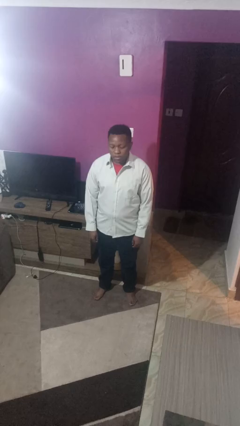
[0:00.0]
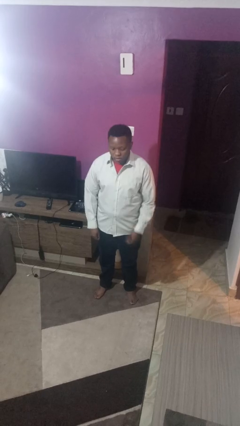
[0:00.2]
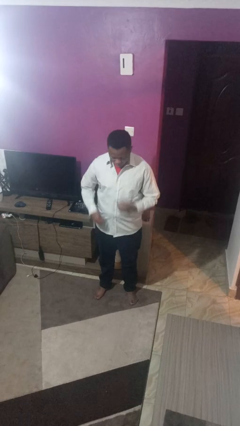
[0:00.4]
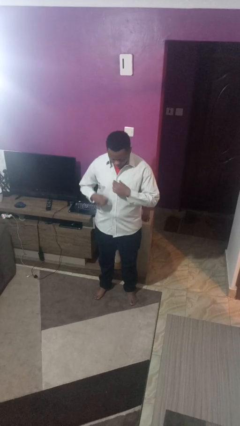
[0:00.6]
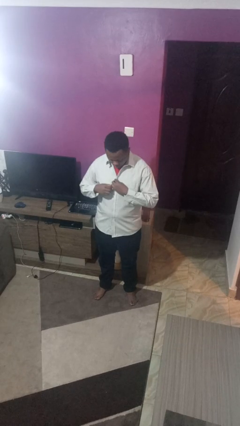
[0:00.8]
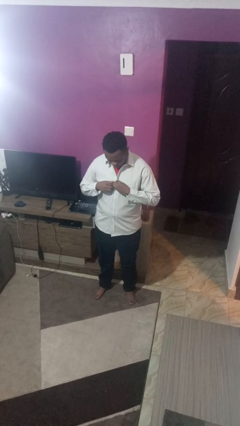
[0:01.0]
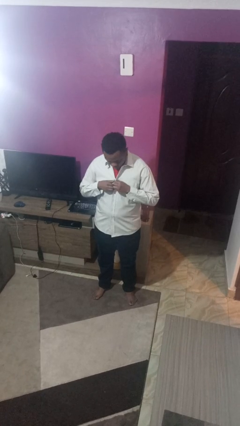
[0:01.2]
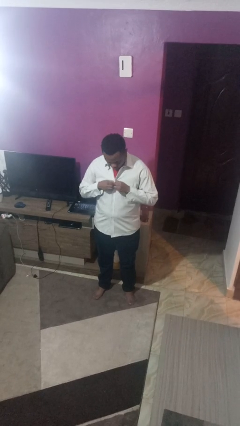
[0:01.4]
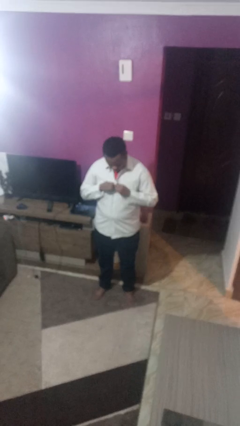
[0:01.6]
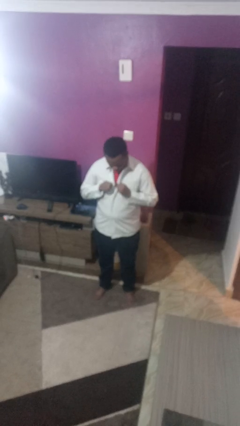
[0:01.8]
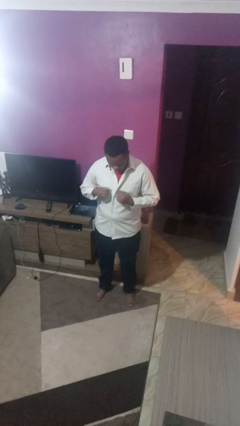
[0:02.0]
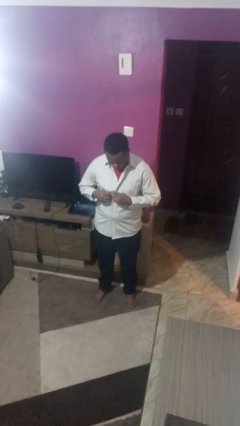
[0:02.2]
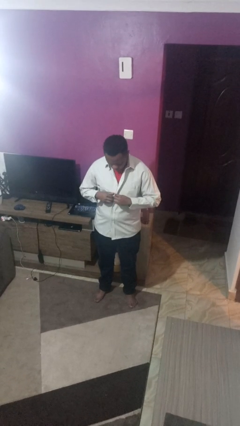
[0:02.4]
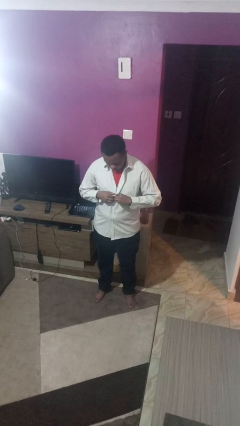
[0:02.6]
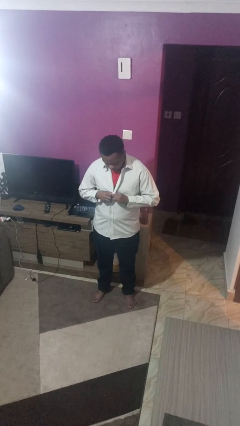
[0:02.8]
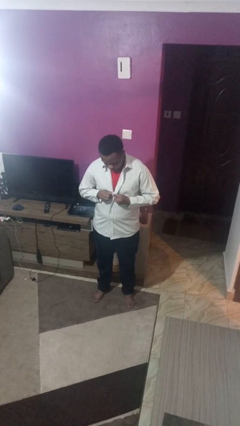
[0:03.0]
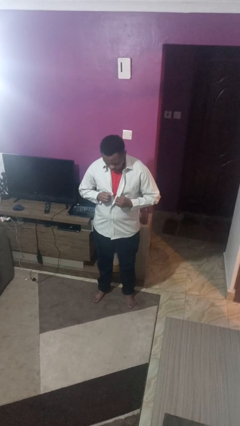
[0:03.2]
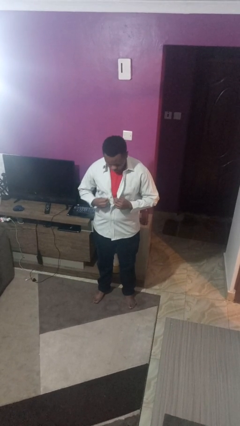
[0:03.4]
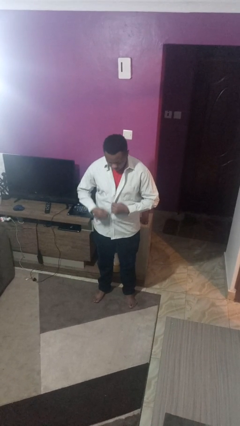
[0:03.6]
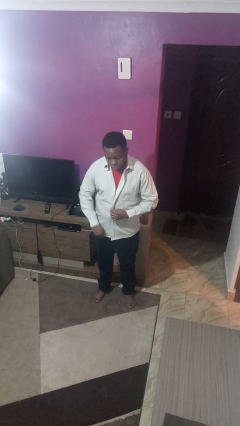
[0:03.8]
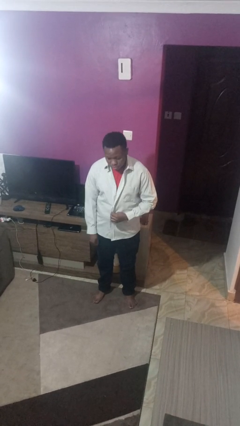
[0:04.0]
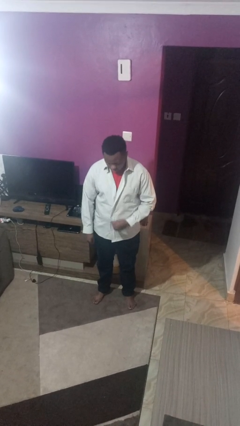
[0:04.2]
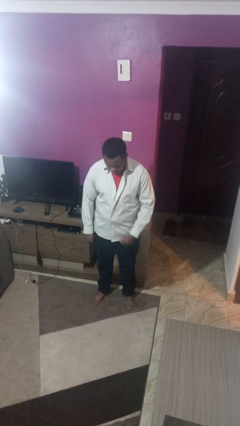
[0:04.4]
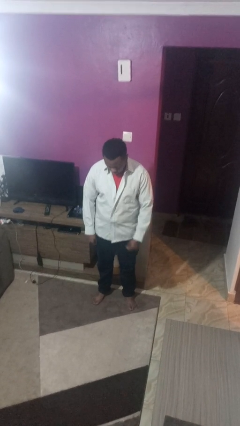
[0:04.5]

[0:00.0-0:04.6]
person unbuttons shirt

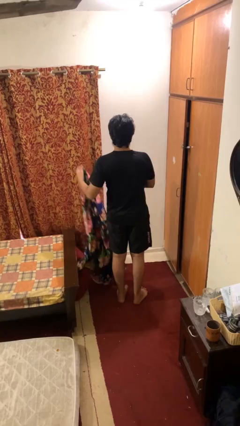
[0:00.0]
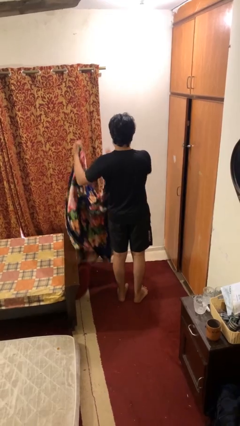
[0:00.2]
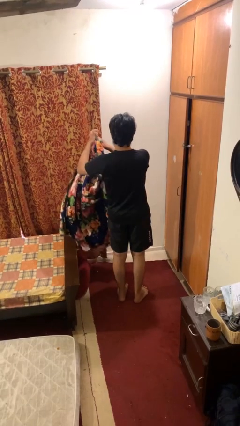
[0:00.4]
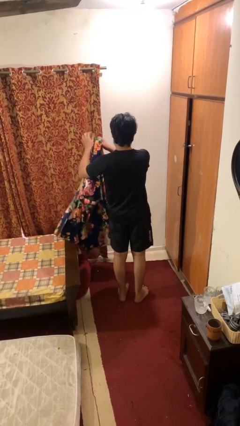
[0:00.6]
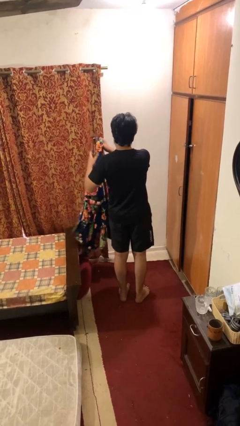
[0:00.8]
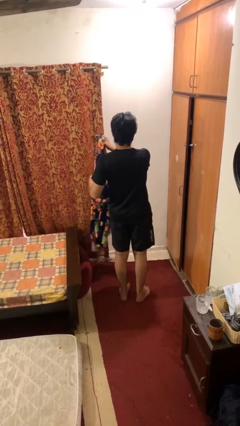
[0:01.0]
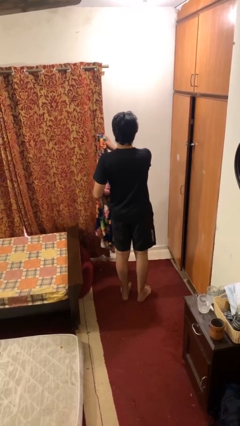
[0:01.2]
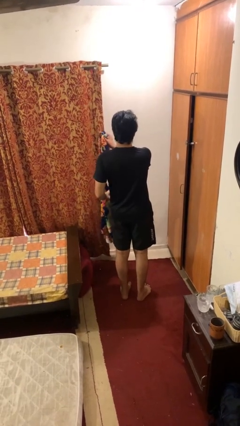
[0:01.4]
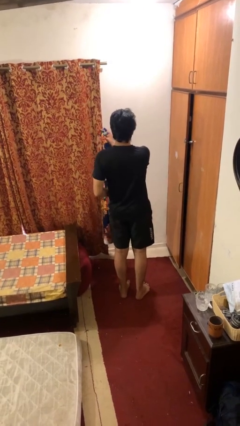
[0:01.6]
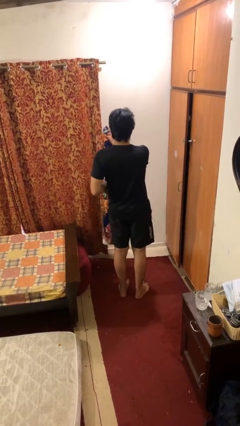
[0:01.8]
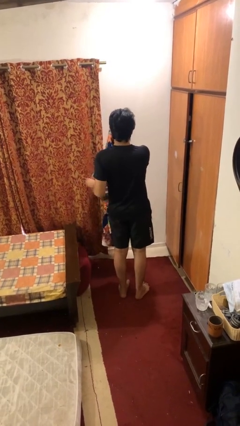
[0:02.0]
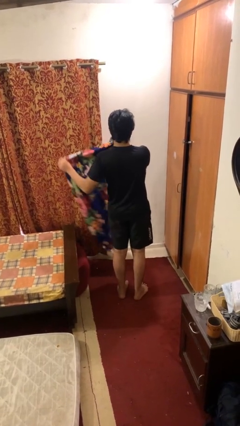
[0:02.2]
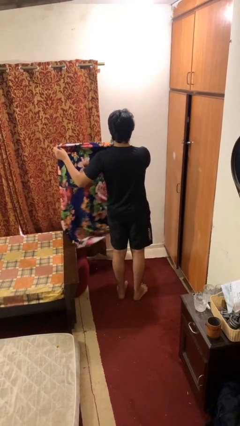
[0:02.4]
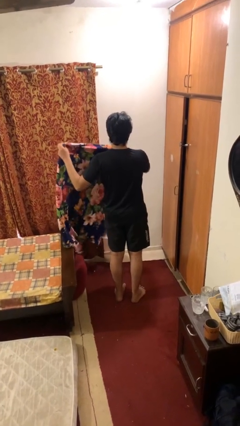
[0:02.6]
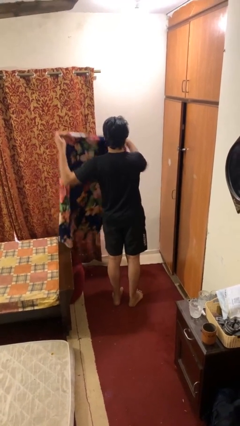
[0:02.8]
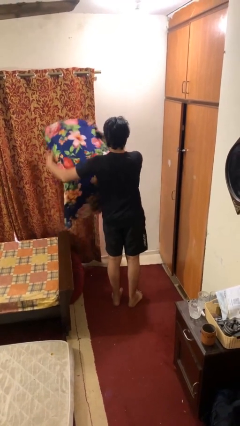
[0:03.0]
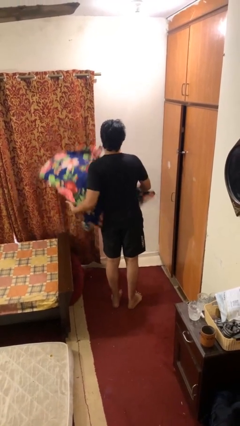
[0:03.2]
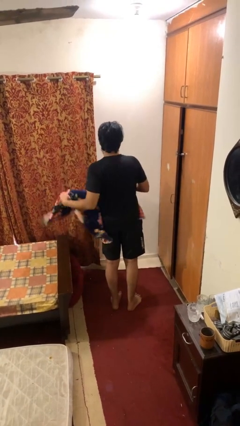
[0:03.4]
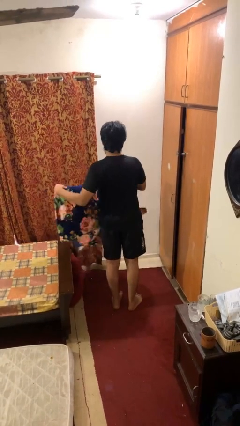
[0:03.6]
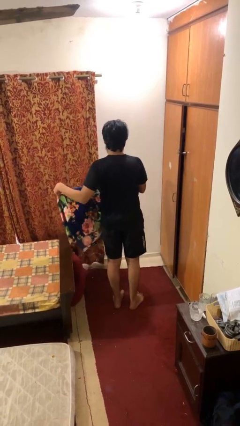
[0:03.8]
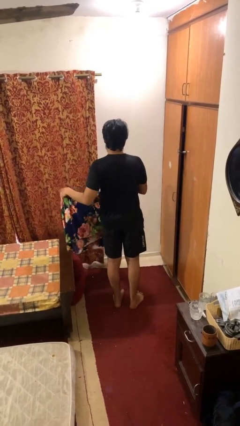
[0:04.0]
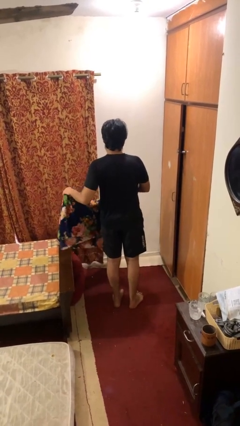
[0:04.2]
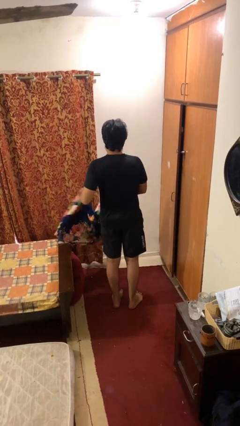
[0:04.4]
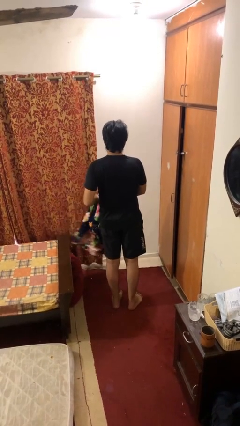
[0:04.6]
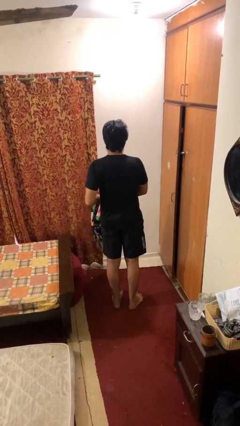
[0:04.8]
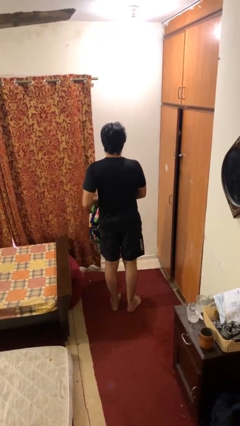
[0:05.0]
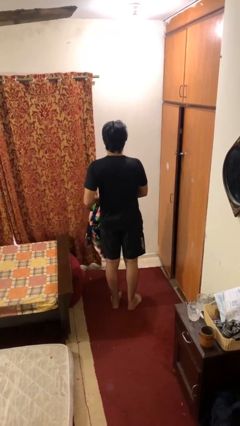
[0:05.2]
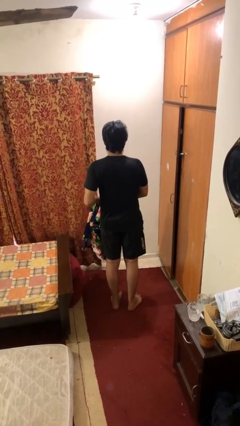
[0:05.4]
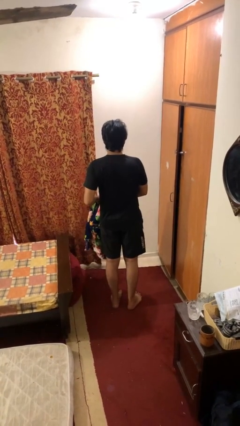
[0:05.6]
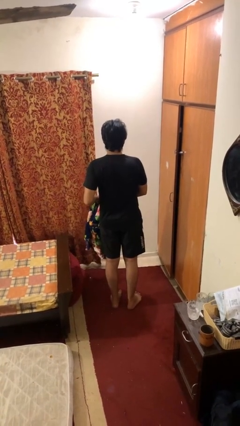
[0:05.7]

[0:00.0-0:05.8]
person folds blanket

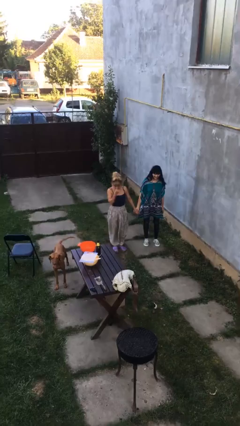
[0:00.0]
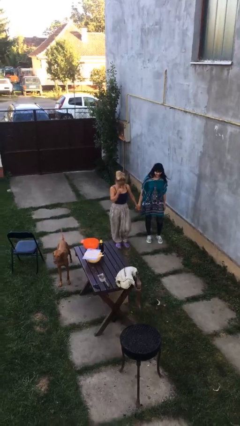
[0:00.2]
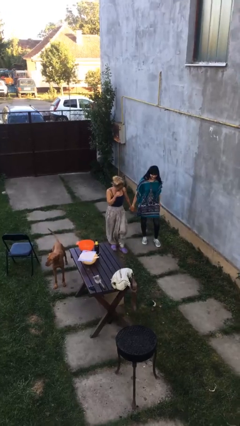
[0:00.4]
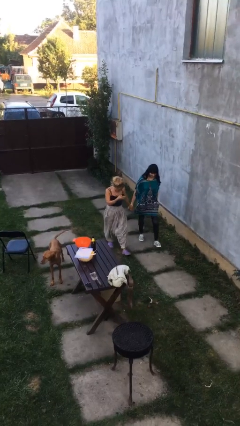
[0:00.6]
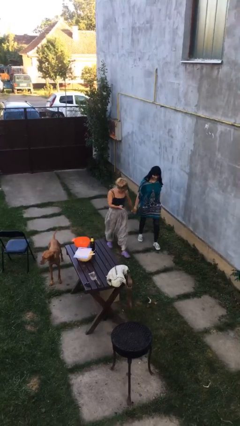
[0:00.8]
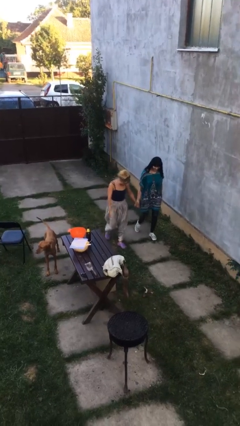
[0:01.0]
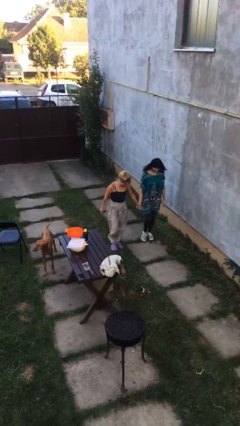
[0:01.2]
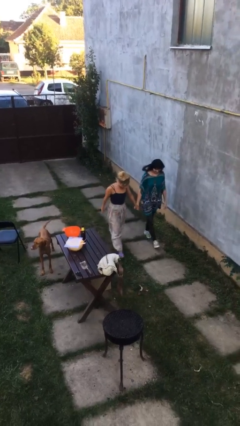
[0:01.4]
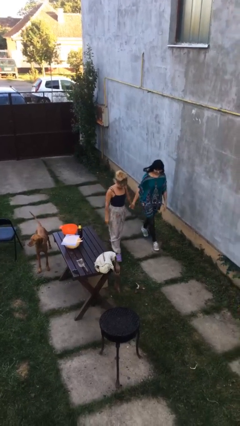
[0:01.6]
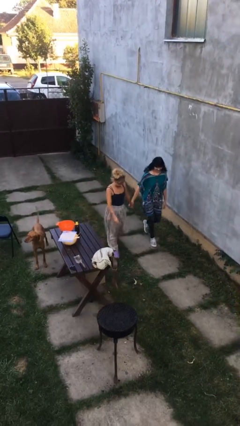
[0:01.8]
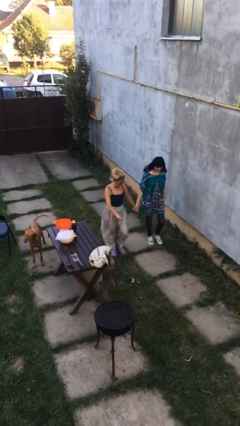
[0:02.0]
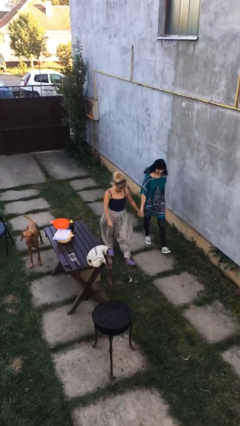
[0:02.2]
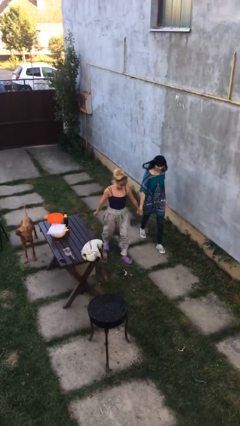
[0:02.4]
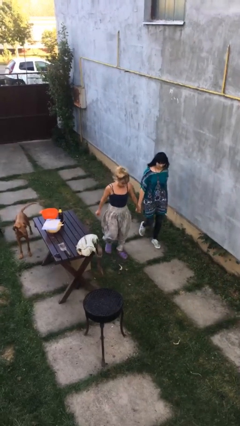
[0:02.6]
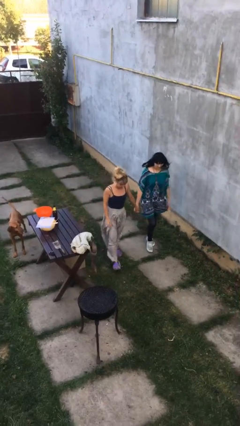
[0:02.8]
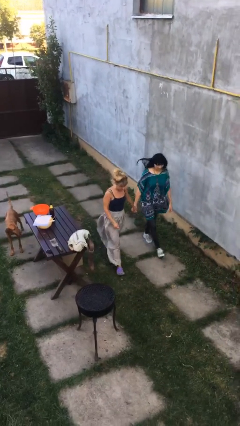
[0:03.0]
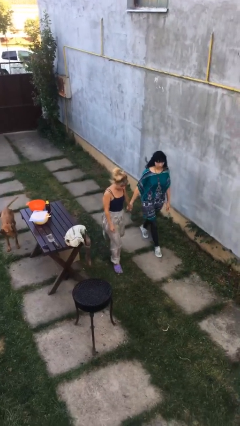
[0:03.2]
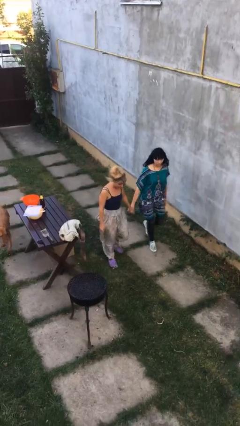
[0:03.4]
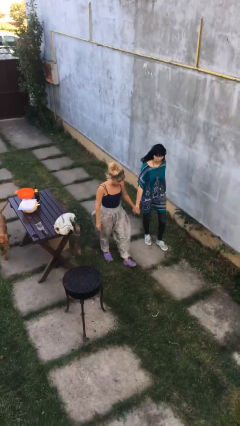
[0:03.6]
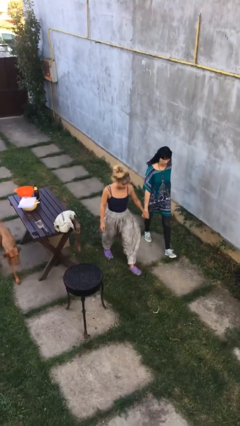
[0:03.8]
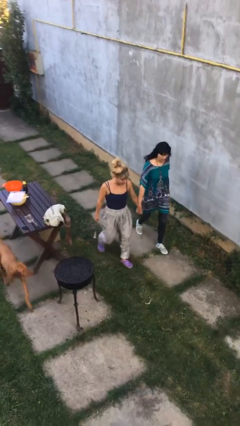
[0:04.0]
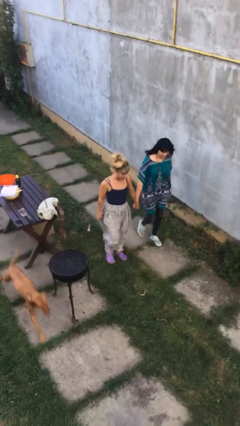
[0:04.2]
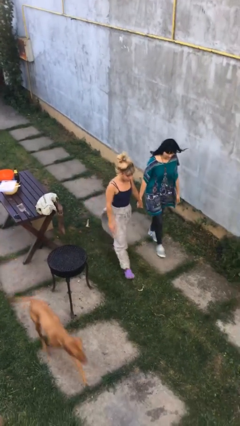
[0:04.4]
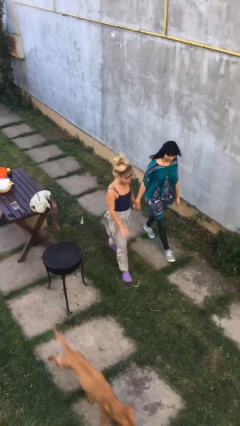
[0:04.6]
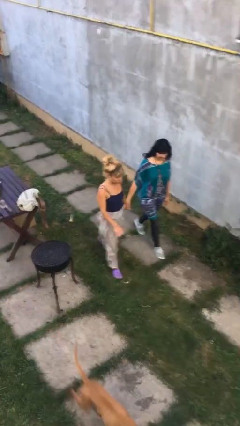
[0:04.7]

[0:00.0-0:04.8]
person holds hand

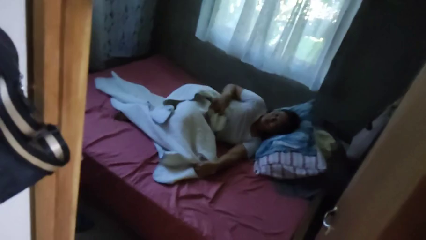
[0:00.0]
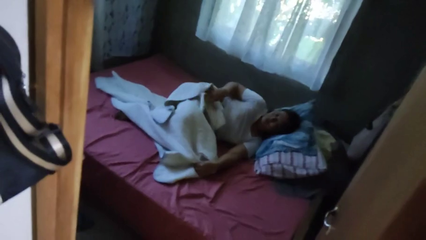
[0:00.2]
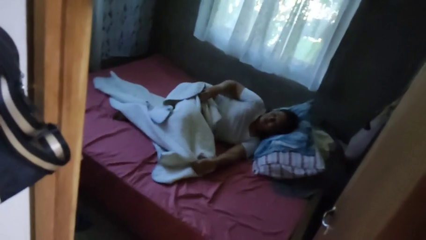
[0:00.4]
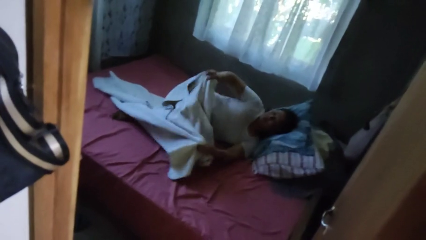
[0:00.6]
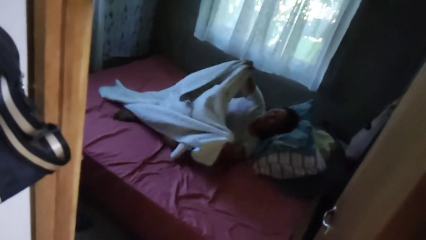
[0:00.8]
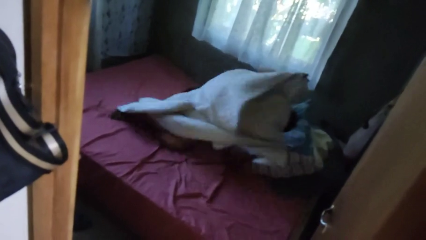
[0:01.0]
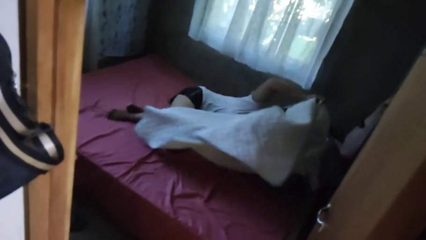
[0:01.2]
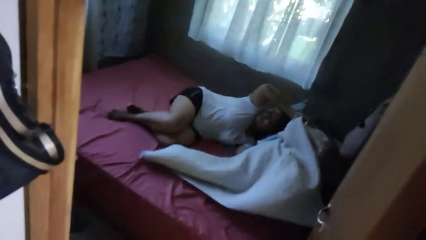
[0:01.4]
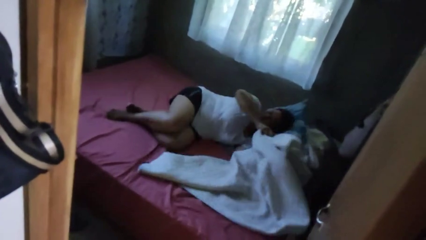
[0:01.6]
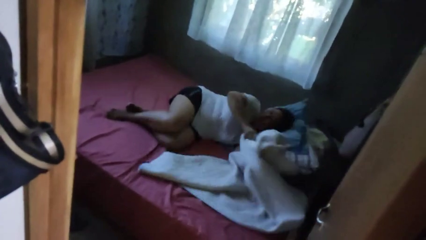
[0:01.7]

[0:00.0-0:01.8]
person uncovers with bedsheets

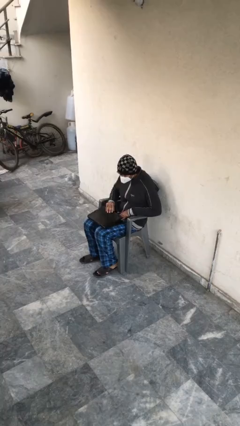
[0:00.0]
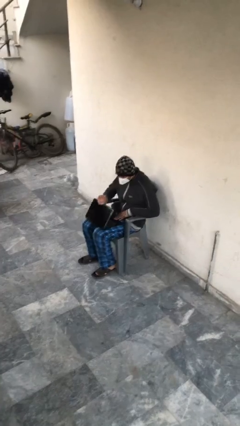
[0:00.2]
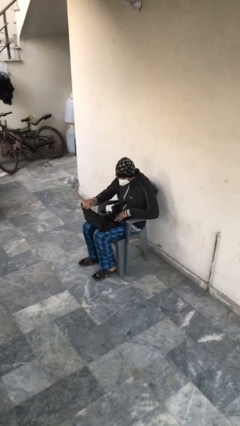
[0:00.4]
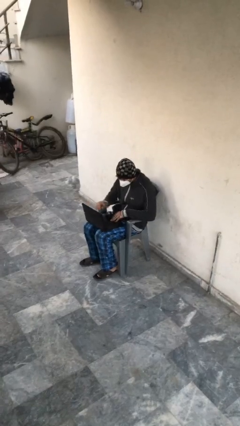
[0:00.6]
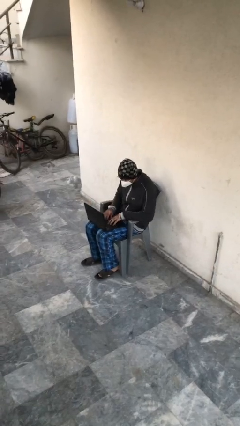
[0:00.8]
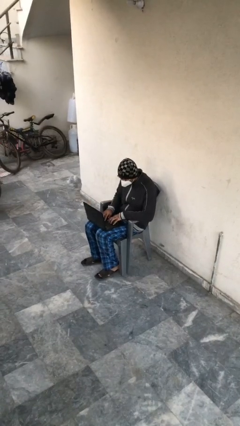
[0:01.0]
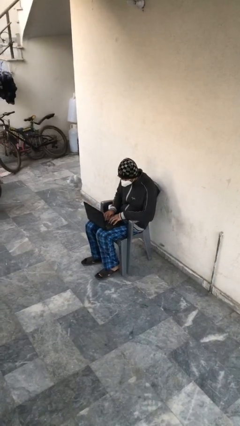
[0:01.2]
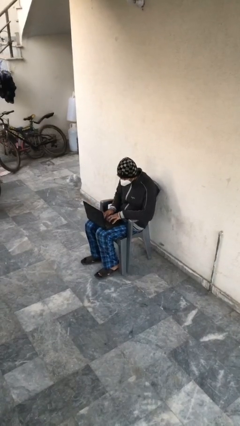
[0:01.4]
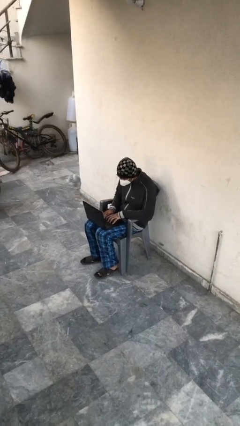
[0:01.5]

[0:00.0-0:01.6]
person interacts with laptop
